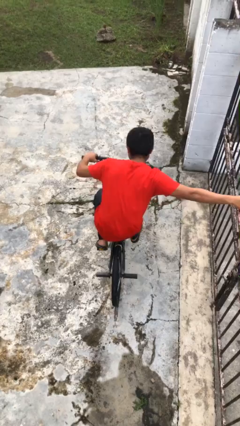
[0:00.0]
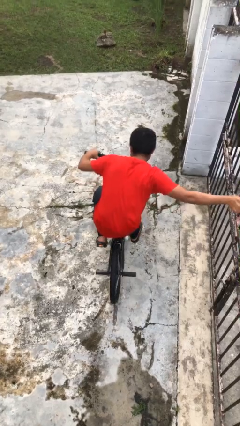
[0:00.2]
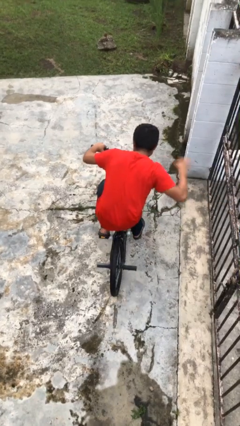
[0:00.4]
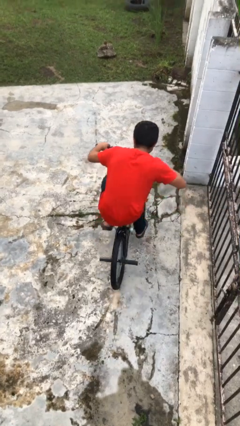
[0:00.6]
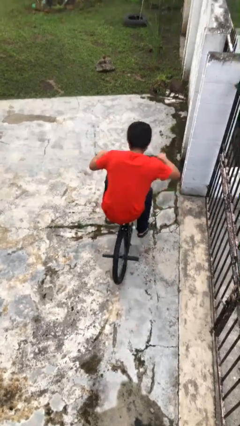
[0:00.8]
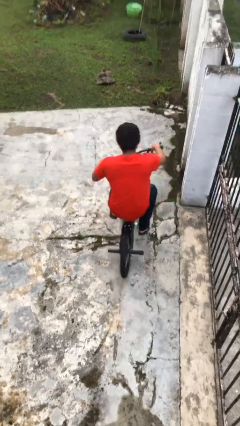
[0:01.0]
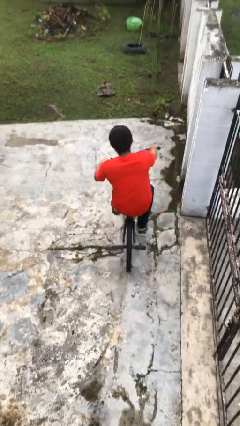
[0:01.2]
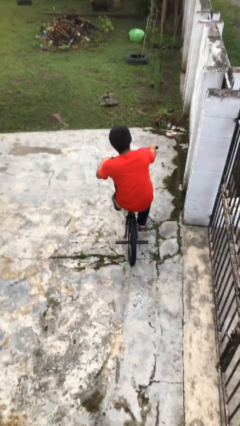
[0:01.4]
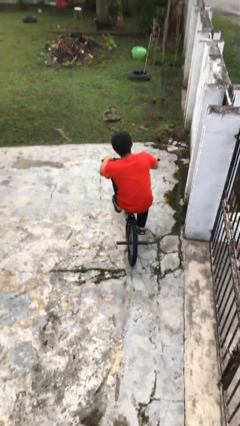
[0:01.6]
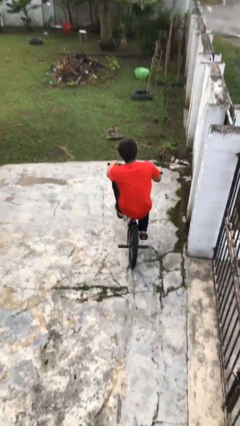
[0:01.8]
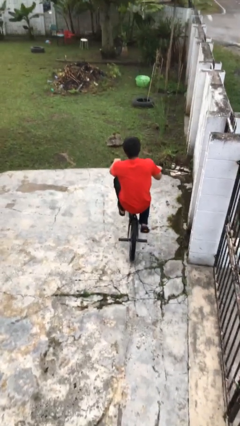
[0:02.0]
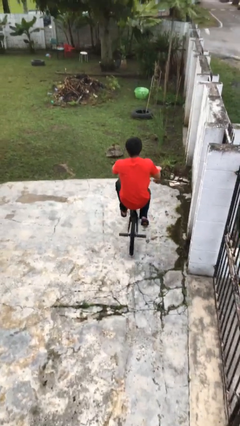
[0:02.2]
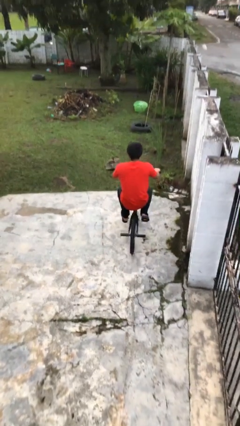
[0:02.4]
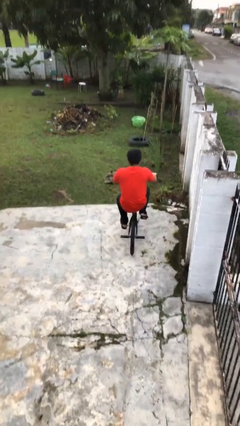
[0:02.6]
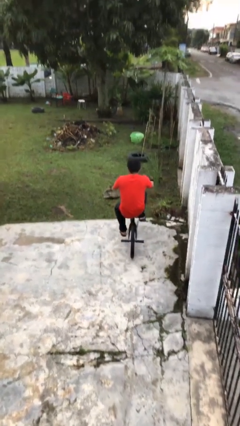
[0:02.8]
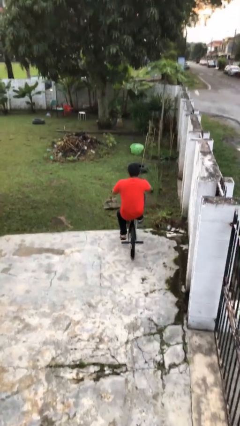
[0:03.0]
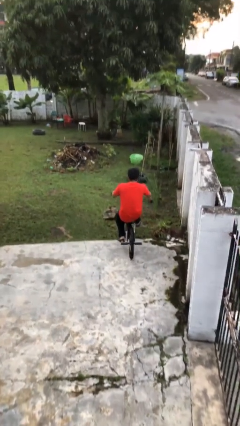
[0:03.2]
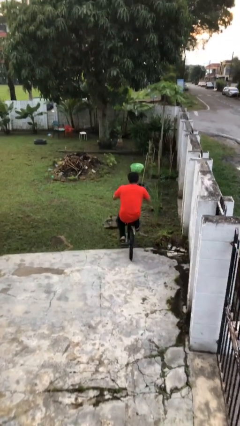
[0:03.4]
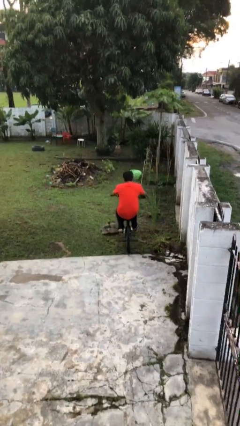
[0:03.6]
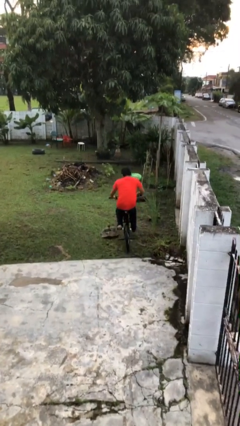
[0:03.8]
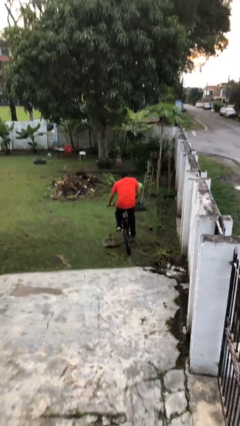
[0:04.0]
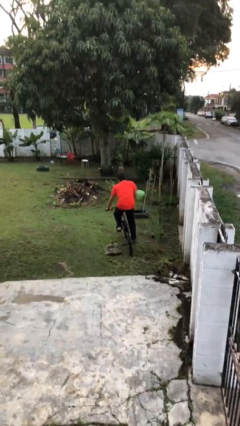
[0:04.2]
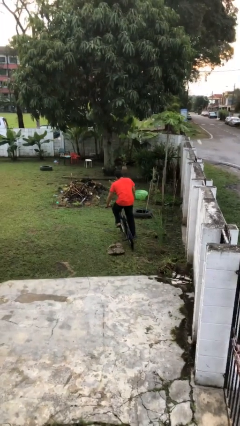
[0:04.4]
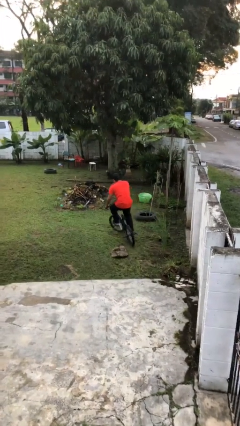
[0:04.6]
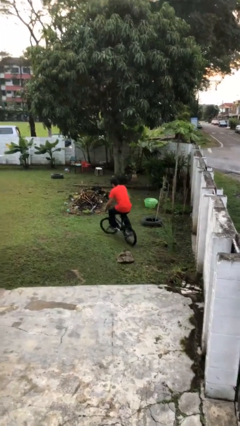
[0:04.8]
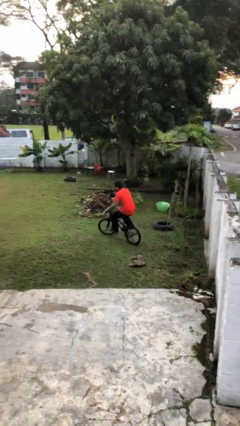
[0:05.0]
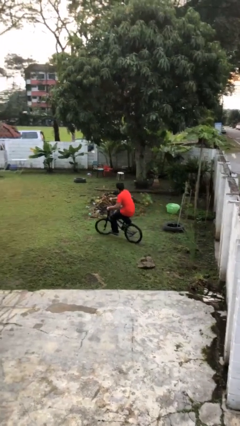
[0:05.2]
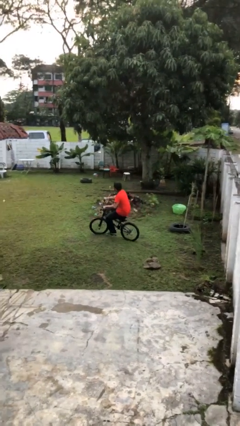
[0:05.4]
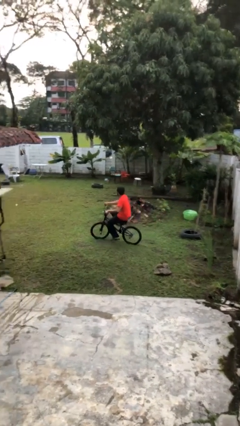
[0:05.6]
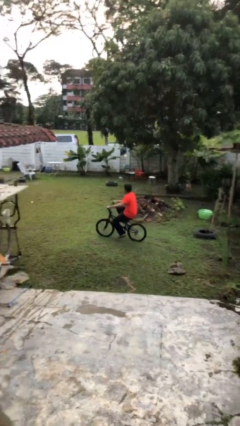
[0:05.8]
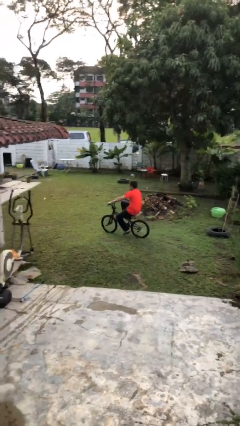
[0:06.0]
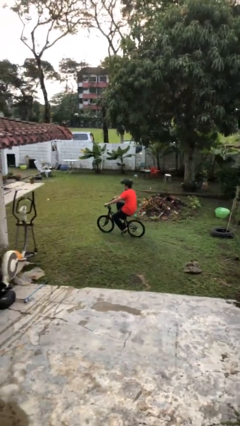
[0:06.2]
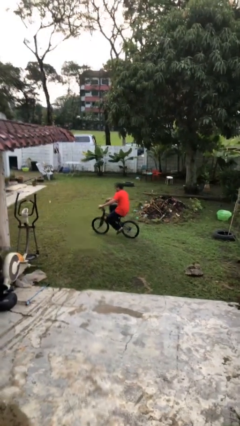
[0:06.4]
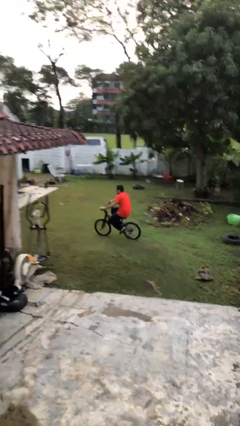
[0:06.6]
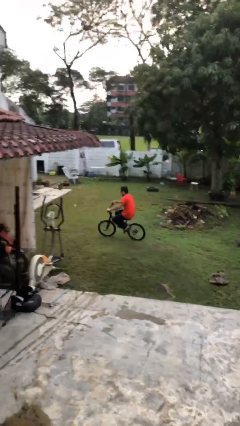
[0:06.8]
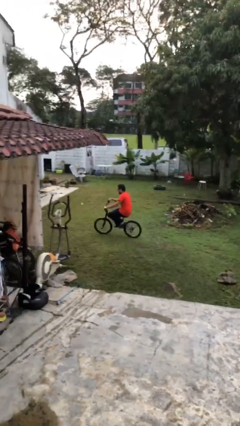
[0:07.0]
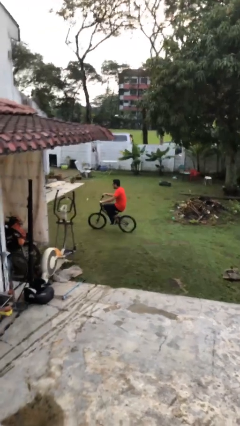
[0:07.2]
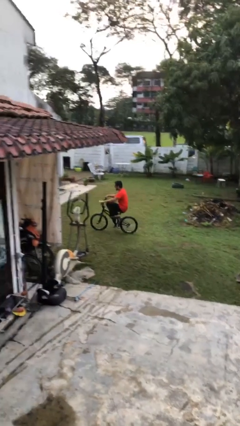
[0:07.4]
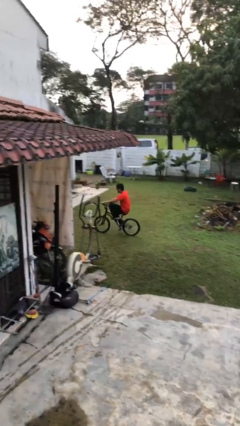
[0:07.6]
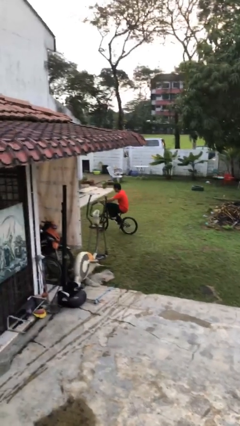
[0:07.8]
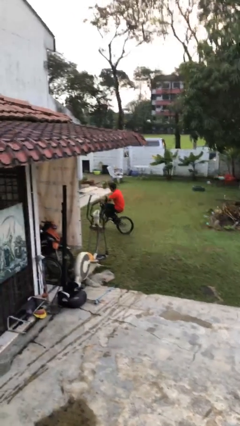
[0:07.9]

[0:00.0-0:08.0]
person rides bicycle

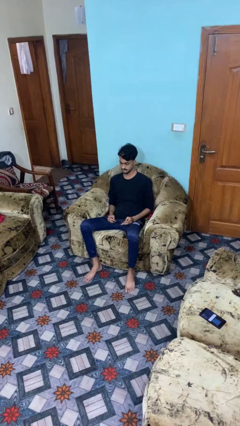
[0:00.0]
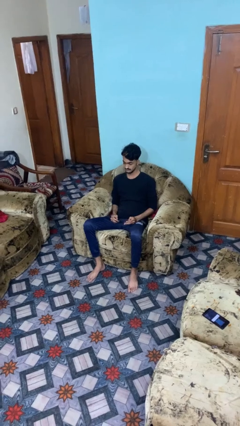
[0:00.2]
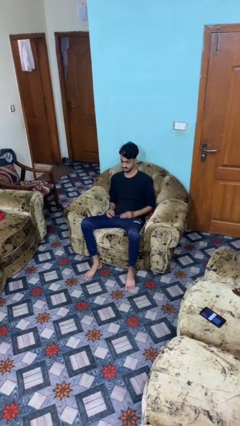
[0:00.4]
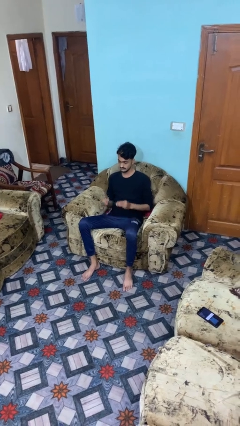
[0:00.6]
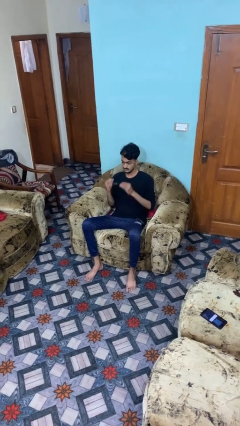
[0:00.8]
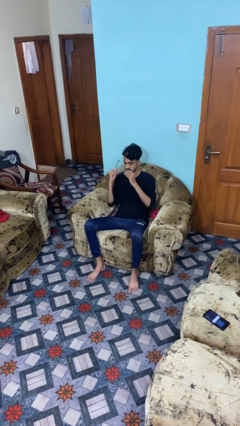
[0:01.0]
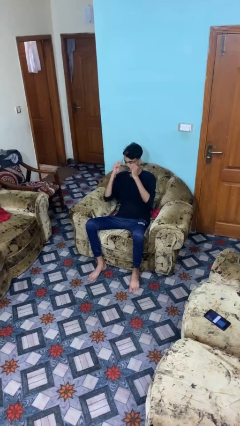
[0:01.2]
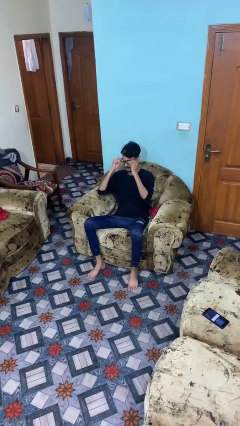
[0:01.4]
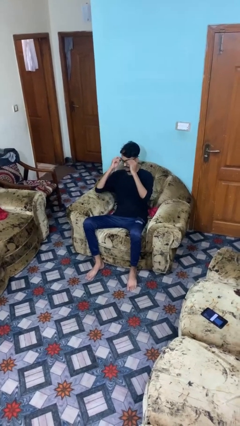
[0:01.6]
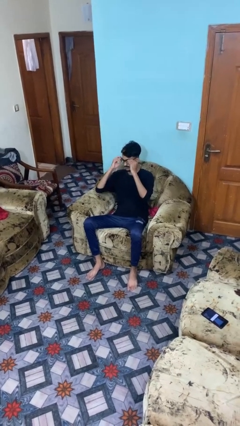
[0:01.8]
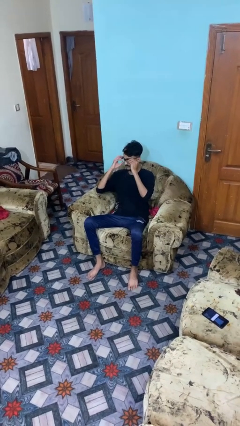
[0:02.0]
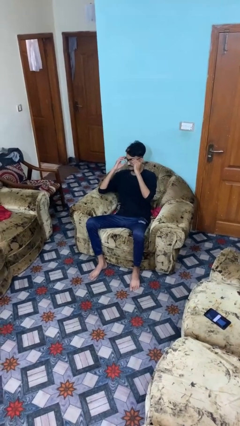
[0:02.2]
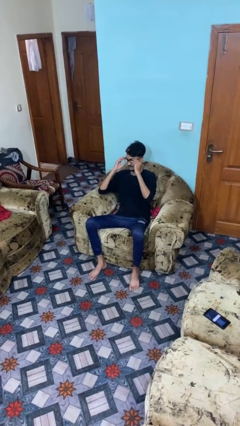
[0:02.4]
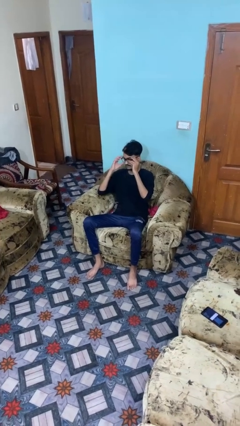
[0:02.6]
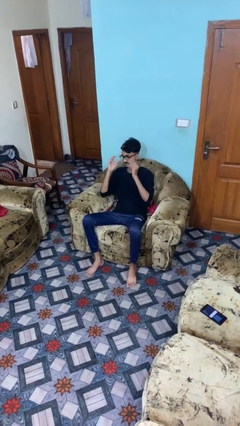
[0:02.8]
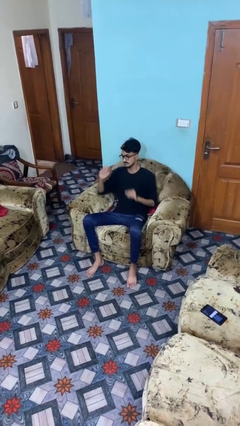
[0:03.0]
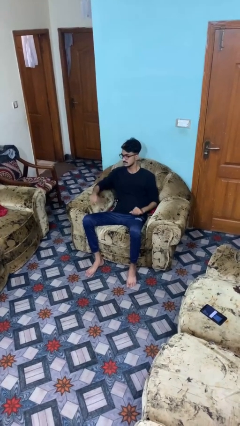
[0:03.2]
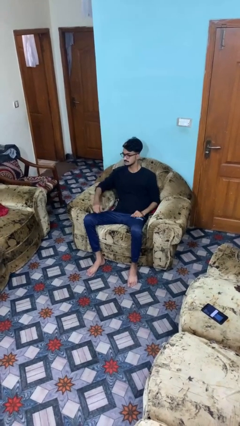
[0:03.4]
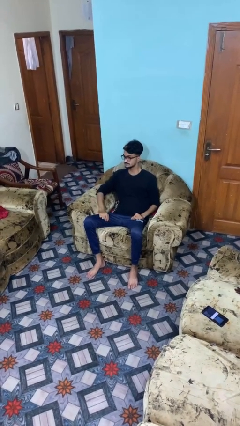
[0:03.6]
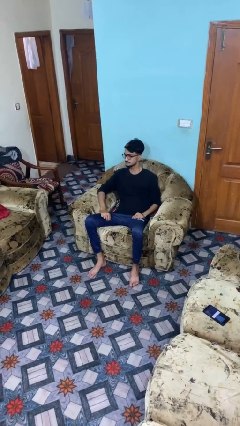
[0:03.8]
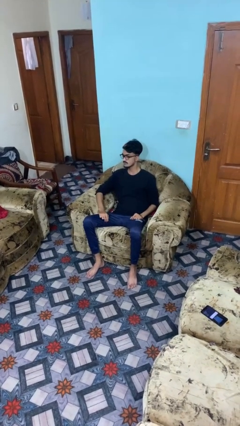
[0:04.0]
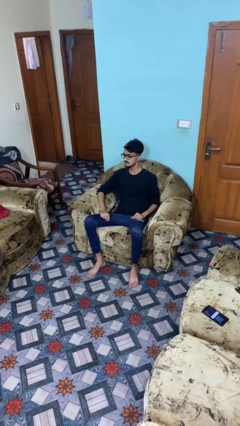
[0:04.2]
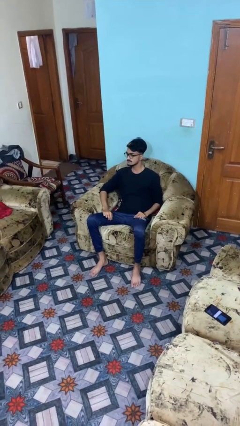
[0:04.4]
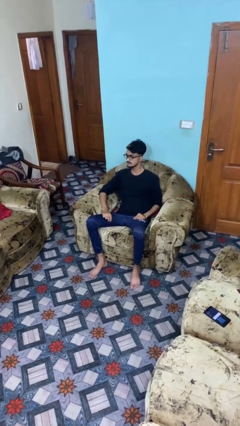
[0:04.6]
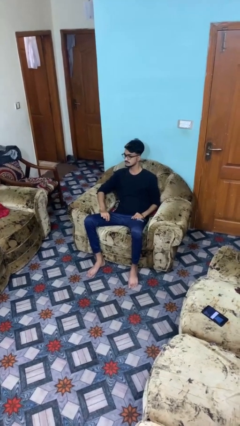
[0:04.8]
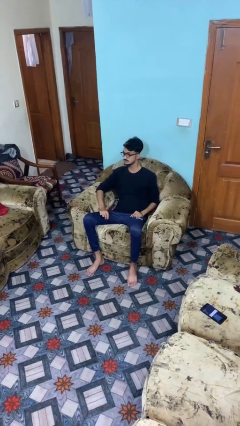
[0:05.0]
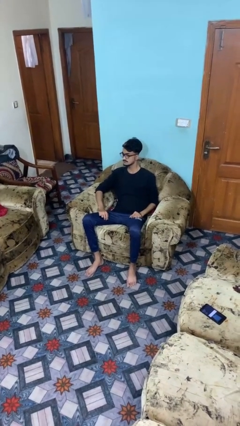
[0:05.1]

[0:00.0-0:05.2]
person puts on glasses

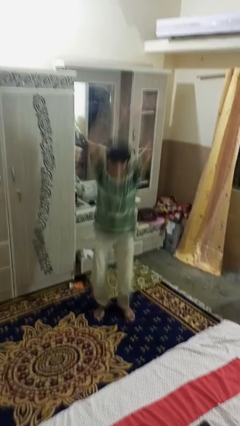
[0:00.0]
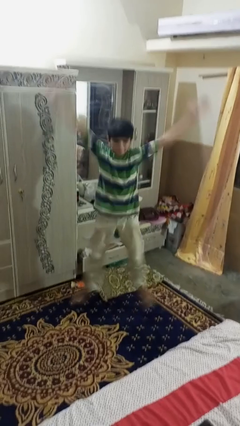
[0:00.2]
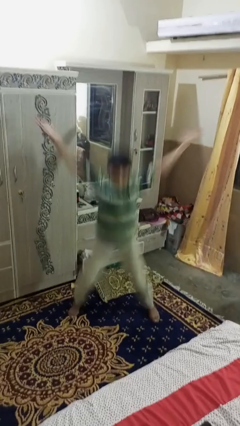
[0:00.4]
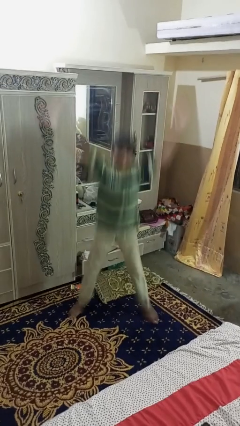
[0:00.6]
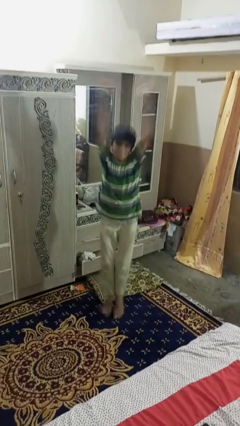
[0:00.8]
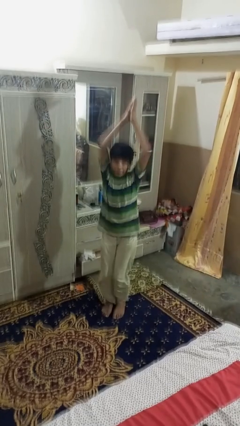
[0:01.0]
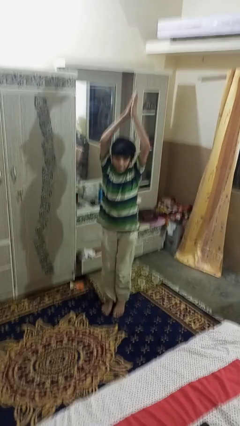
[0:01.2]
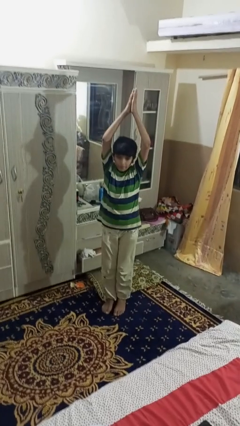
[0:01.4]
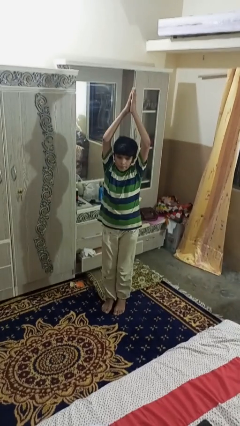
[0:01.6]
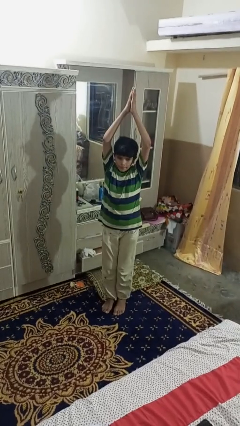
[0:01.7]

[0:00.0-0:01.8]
person exercises with jumping jacks

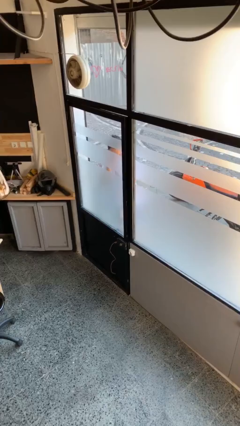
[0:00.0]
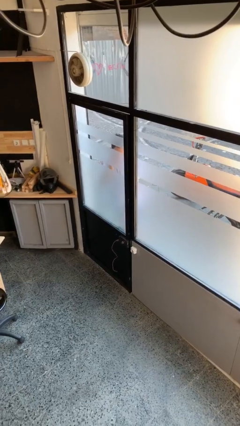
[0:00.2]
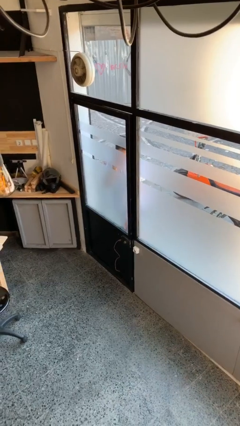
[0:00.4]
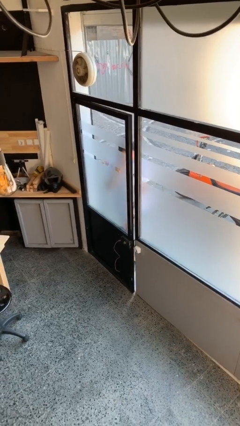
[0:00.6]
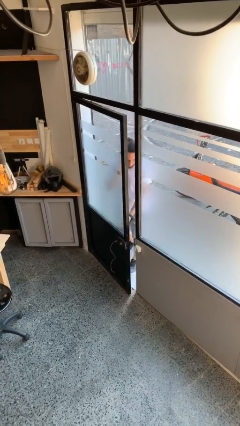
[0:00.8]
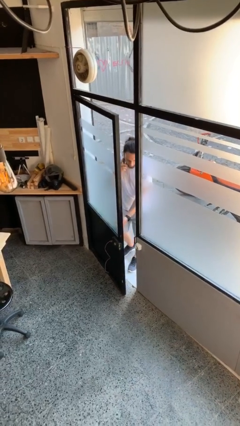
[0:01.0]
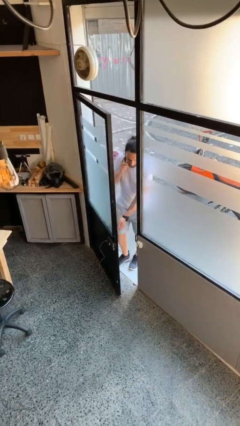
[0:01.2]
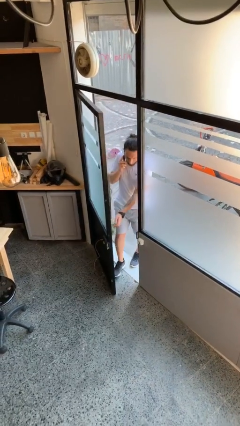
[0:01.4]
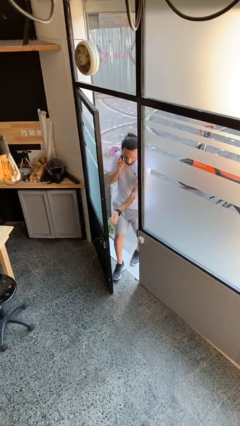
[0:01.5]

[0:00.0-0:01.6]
person opens facility door

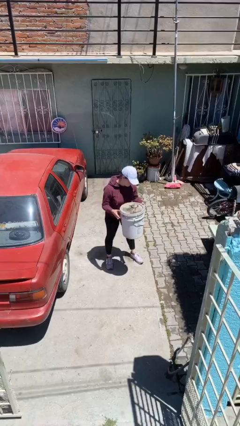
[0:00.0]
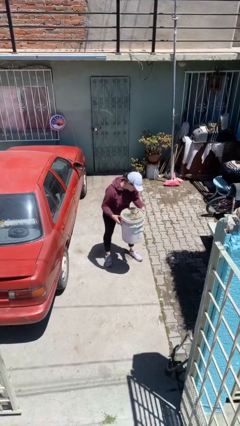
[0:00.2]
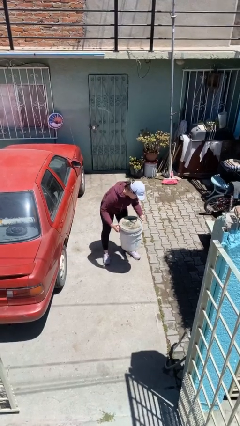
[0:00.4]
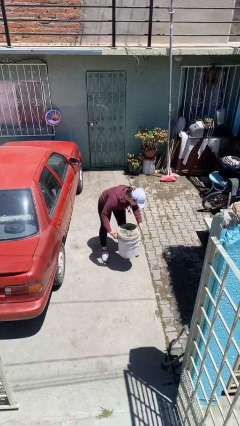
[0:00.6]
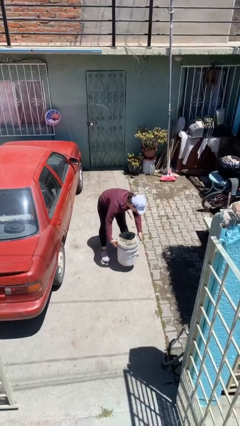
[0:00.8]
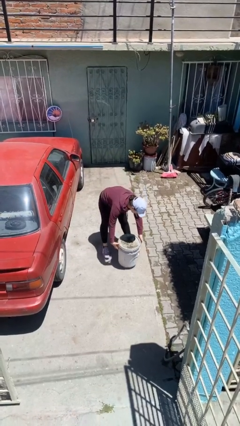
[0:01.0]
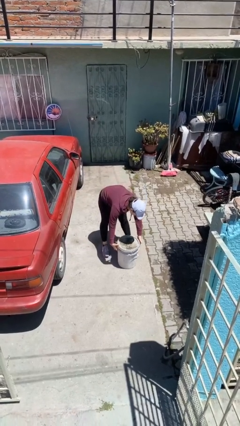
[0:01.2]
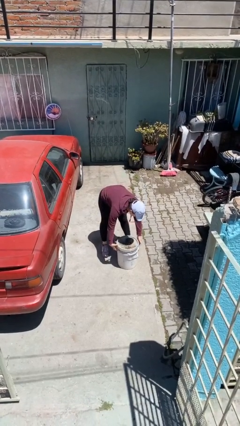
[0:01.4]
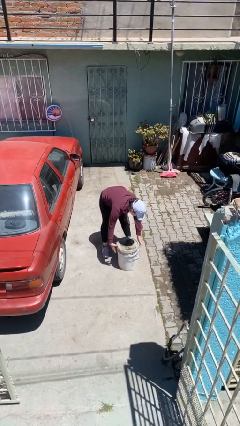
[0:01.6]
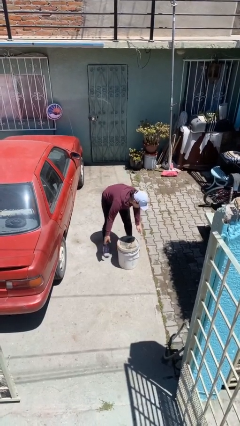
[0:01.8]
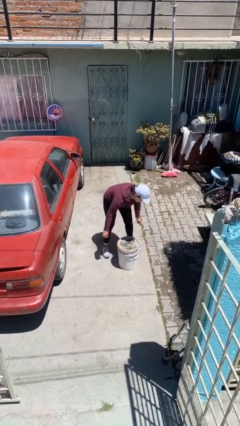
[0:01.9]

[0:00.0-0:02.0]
person puts down object on floor
